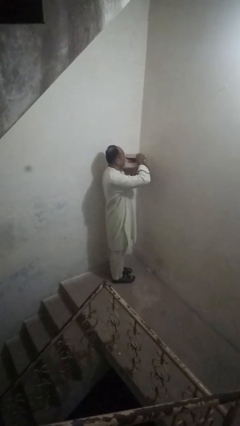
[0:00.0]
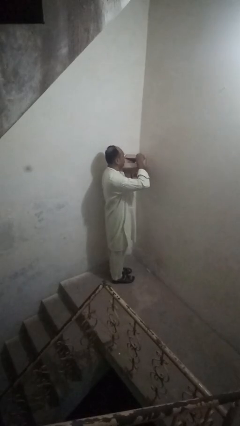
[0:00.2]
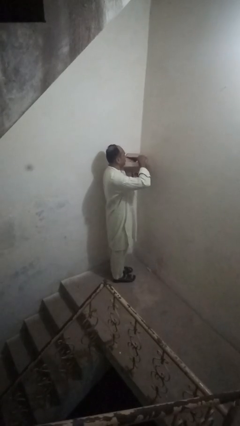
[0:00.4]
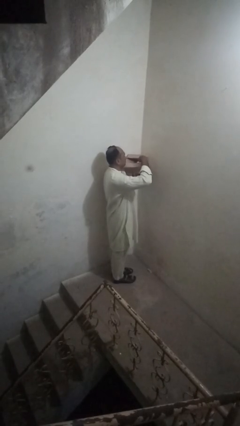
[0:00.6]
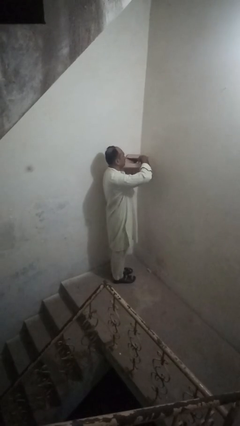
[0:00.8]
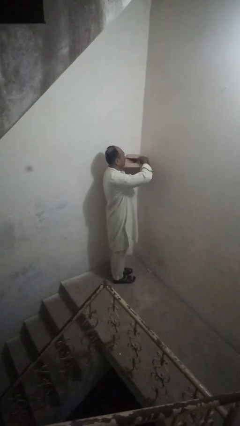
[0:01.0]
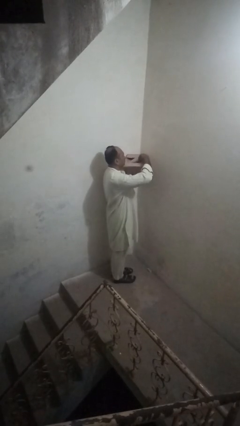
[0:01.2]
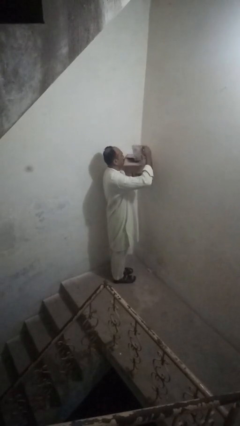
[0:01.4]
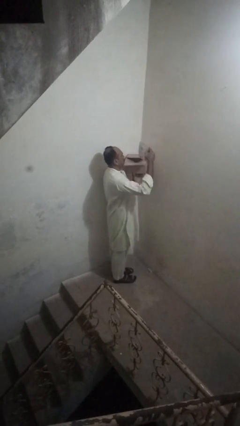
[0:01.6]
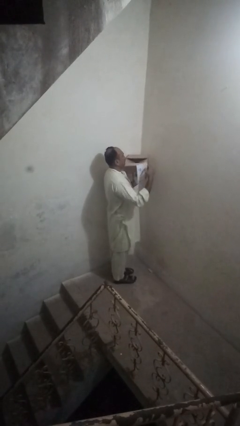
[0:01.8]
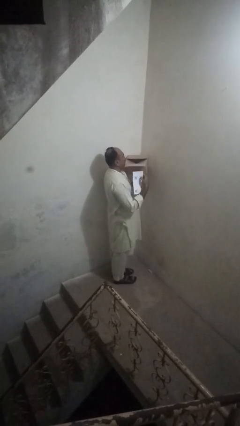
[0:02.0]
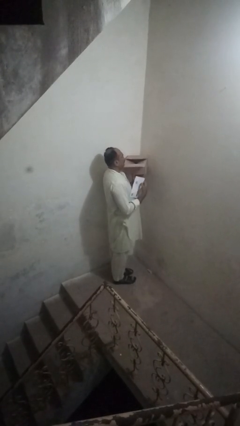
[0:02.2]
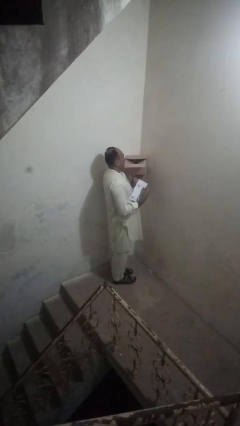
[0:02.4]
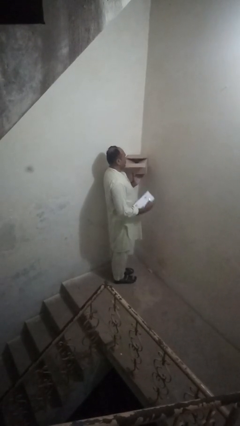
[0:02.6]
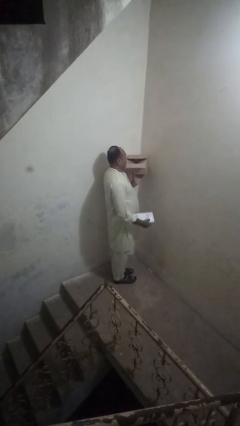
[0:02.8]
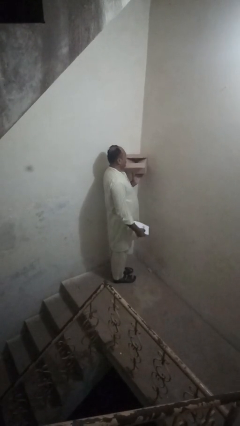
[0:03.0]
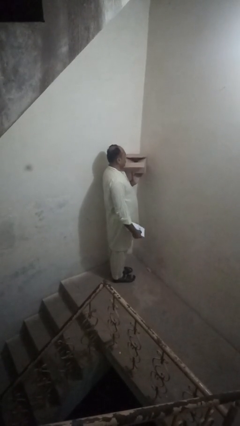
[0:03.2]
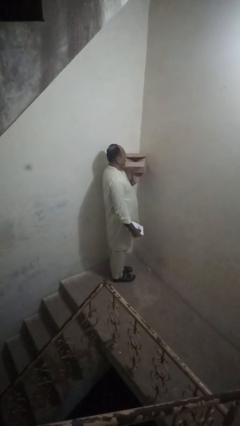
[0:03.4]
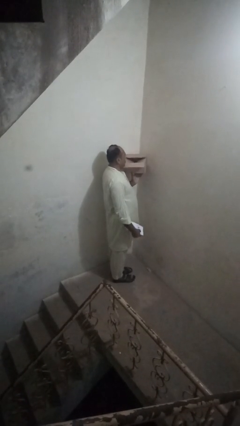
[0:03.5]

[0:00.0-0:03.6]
person takes letters from mailbox

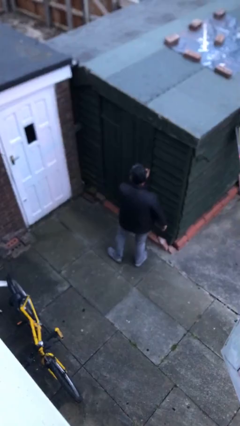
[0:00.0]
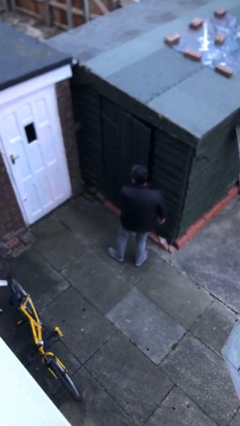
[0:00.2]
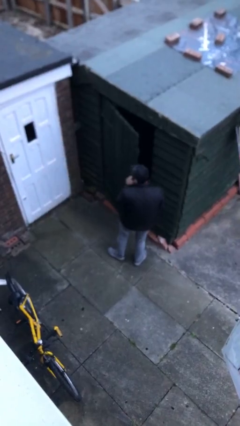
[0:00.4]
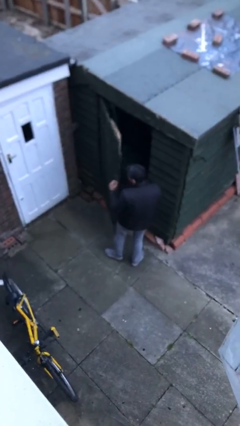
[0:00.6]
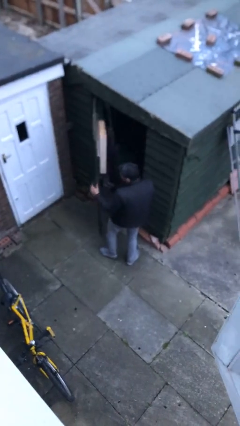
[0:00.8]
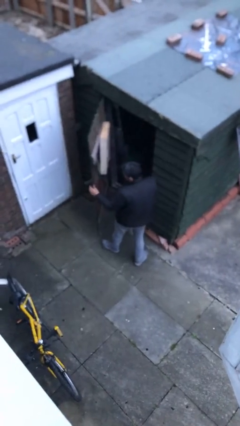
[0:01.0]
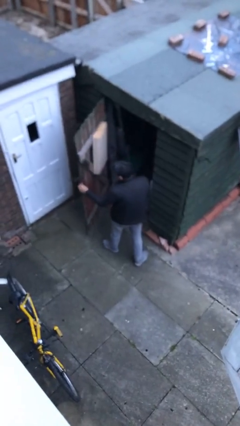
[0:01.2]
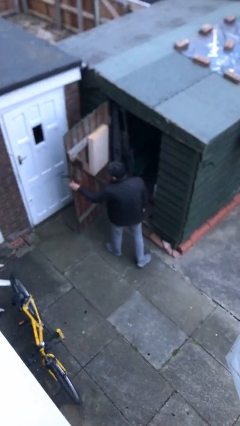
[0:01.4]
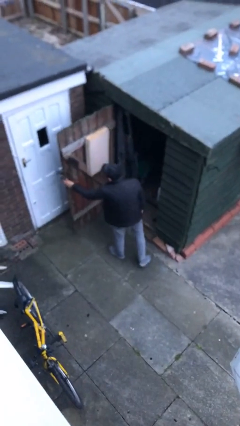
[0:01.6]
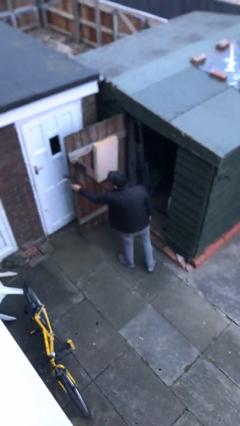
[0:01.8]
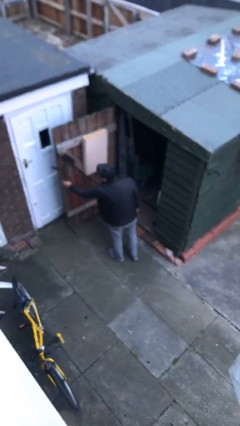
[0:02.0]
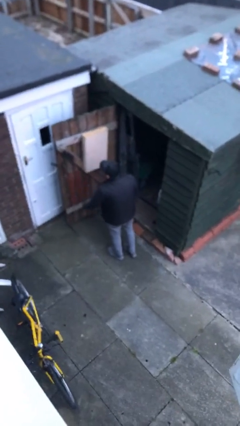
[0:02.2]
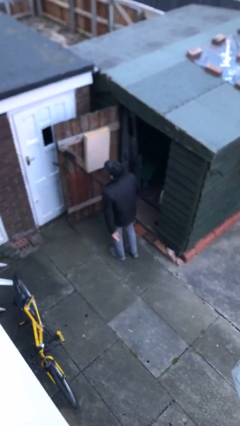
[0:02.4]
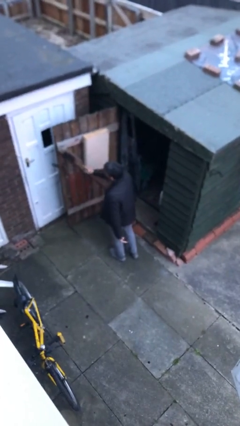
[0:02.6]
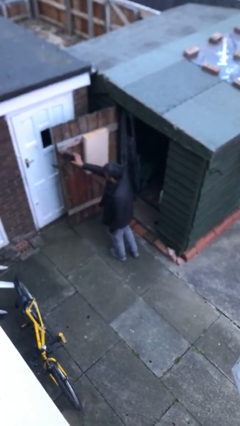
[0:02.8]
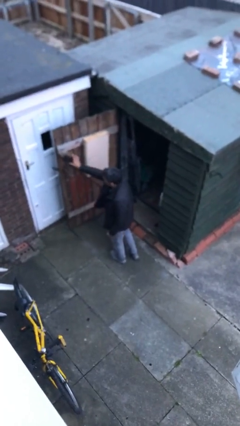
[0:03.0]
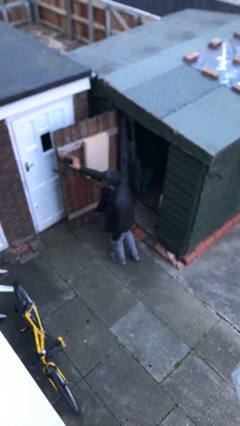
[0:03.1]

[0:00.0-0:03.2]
person opens facility door

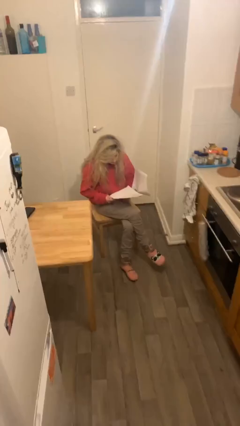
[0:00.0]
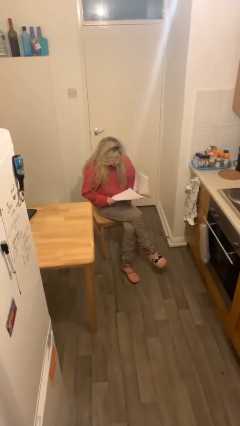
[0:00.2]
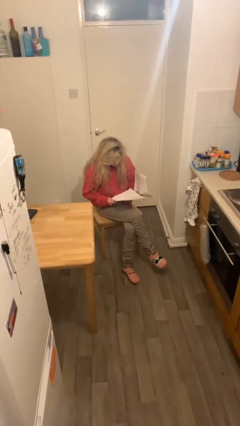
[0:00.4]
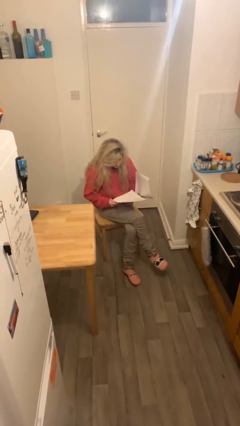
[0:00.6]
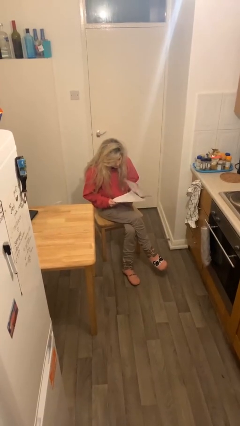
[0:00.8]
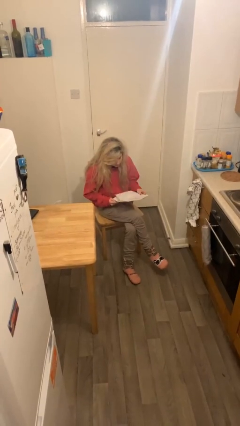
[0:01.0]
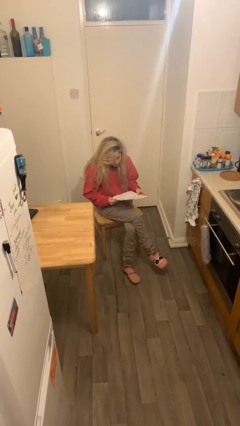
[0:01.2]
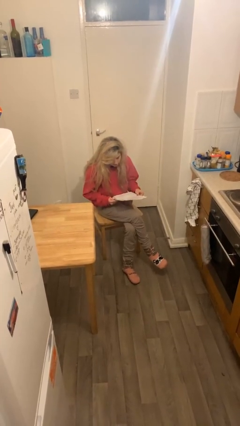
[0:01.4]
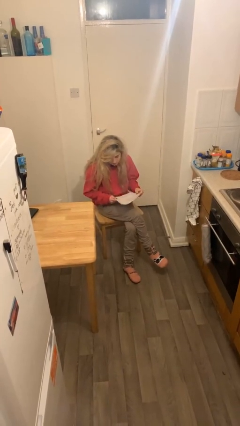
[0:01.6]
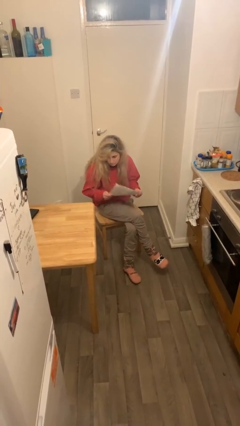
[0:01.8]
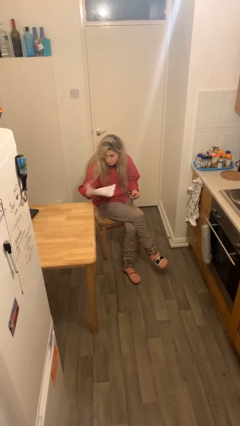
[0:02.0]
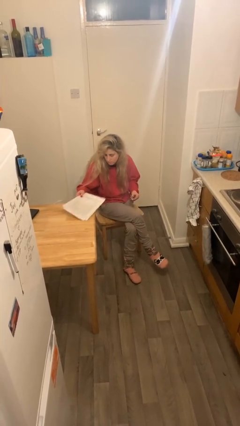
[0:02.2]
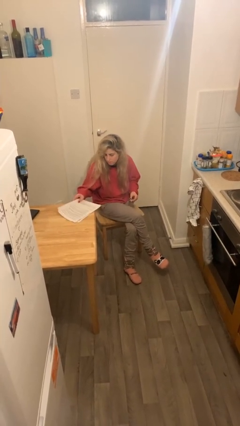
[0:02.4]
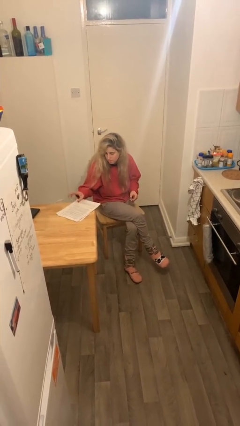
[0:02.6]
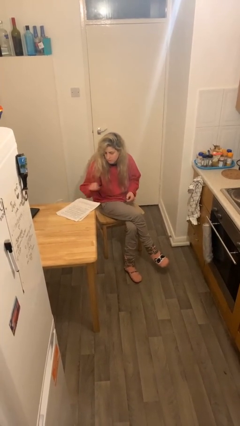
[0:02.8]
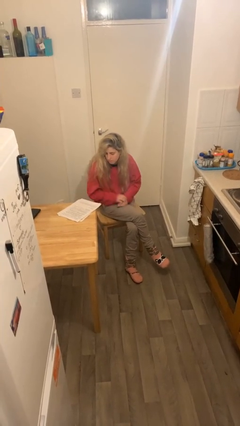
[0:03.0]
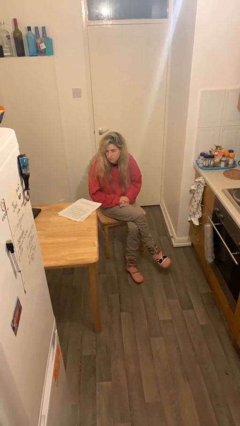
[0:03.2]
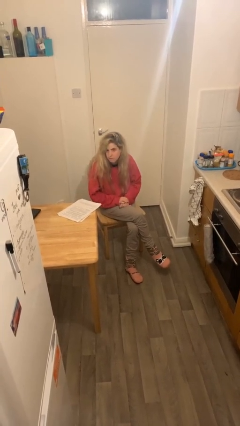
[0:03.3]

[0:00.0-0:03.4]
person puts down object on table

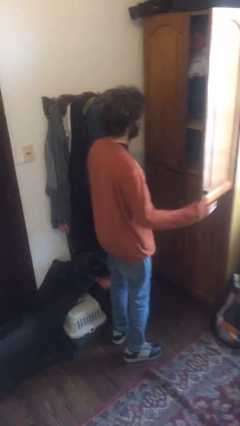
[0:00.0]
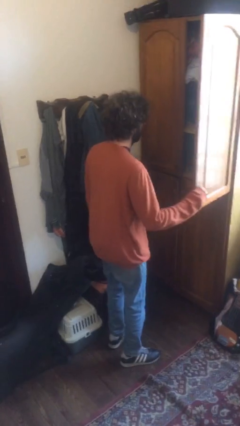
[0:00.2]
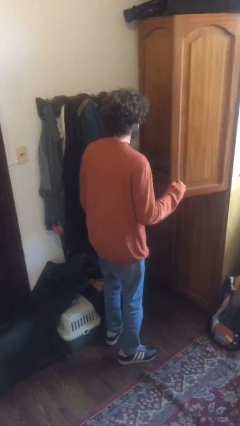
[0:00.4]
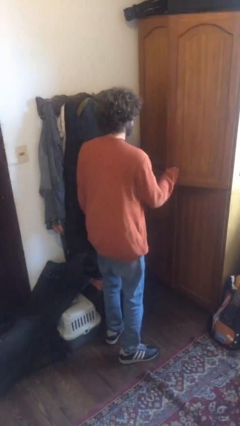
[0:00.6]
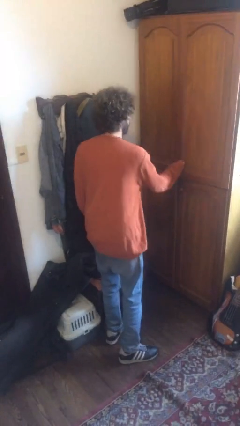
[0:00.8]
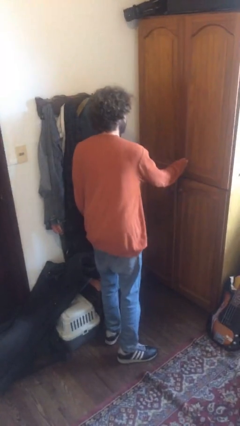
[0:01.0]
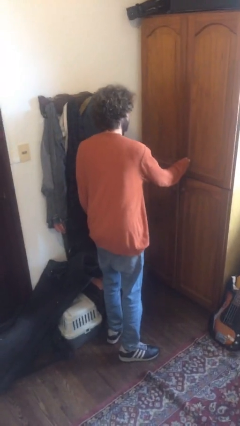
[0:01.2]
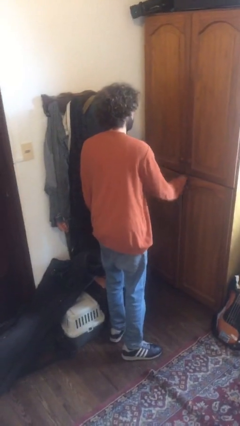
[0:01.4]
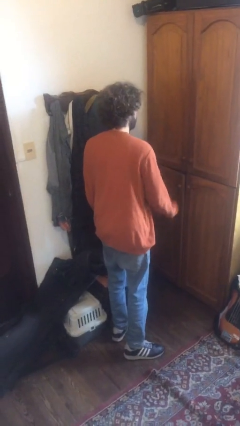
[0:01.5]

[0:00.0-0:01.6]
person closes dresser drawer

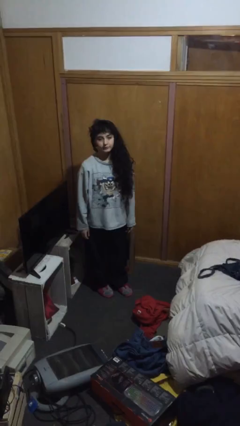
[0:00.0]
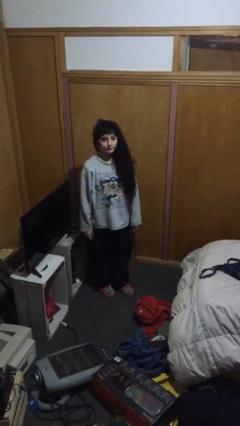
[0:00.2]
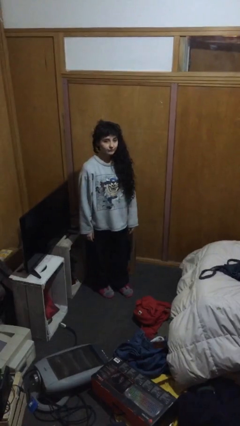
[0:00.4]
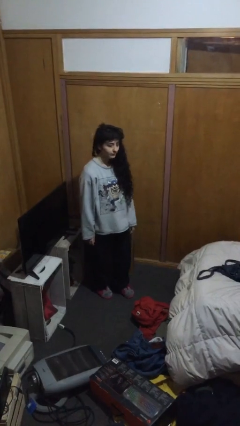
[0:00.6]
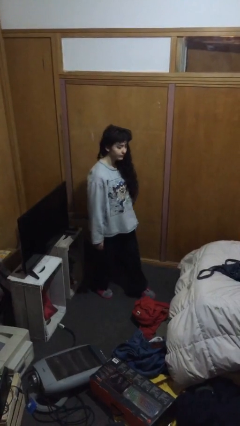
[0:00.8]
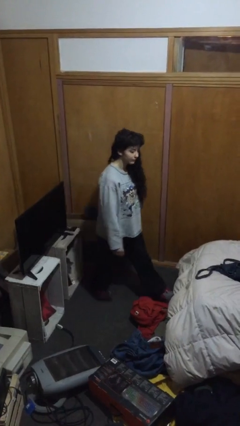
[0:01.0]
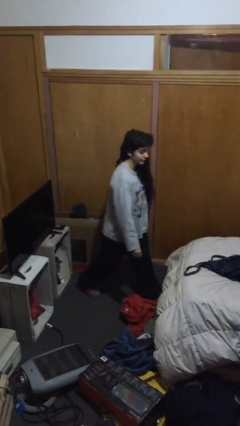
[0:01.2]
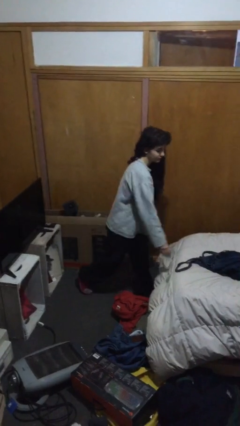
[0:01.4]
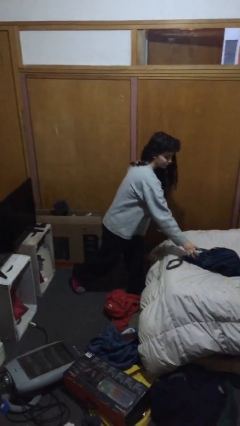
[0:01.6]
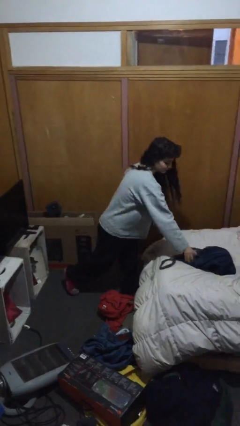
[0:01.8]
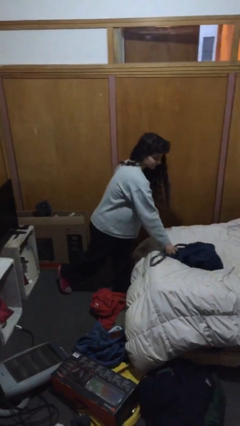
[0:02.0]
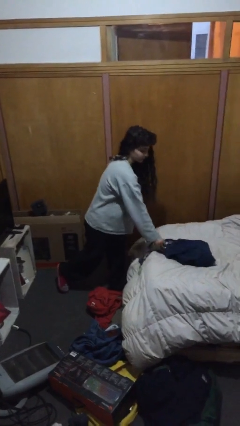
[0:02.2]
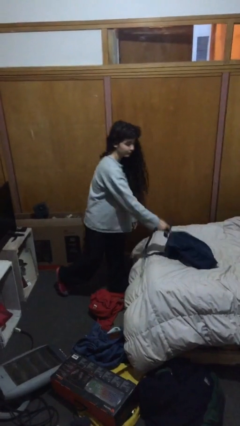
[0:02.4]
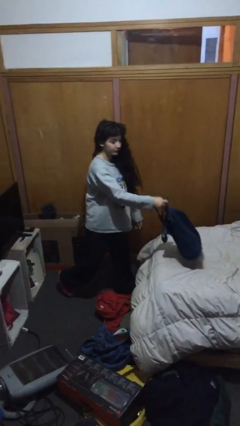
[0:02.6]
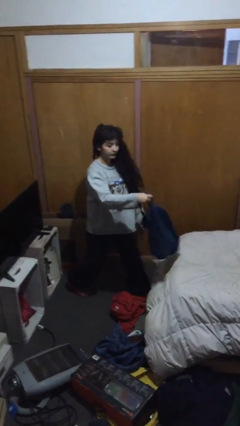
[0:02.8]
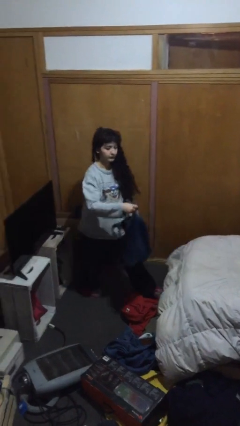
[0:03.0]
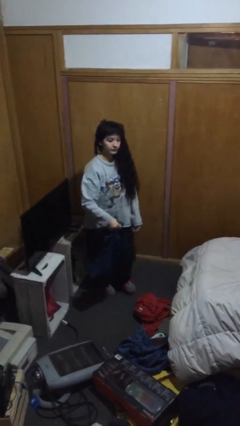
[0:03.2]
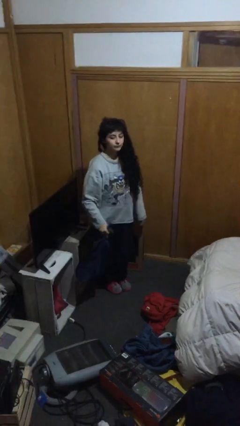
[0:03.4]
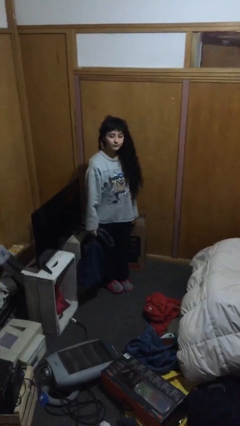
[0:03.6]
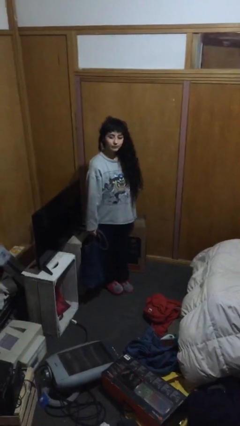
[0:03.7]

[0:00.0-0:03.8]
person picks up object from bed

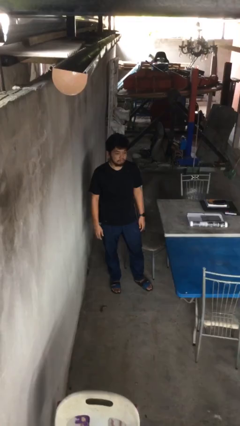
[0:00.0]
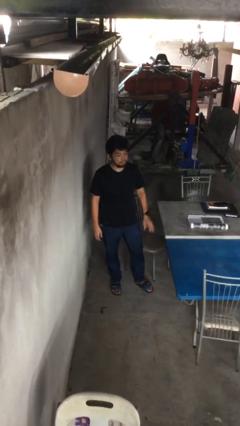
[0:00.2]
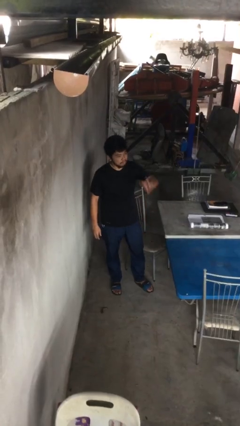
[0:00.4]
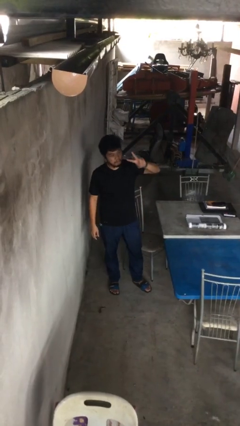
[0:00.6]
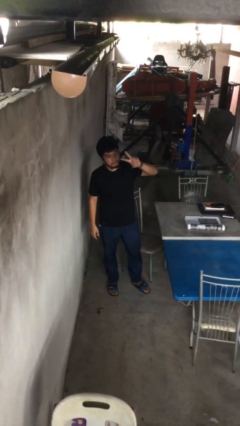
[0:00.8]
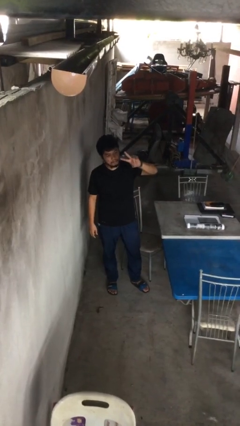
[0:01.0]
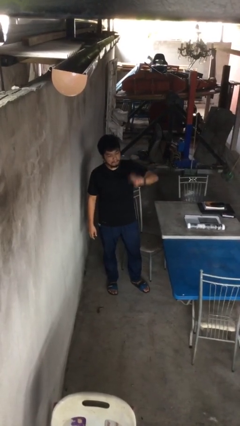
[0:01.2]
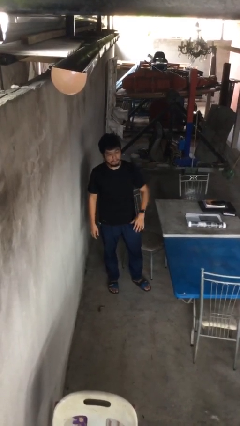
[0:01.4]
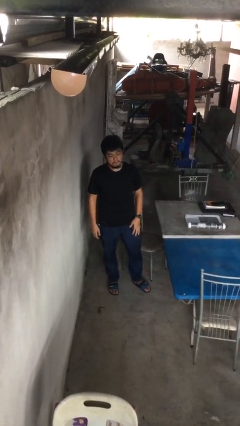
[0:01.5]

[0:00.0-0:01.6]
person gestures peace
